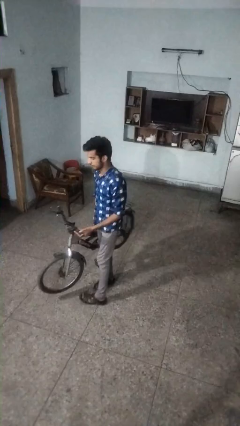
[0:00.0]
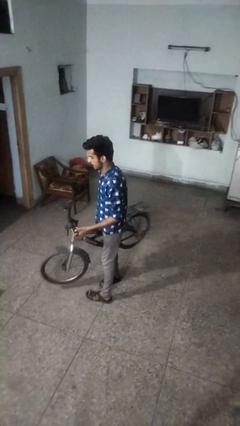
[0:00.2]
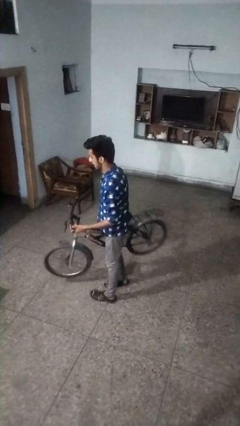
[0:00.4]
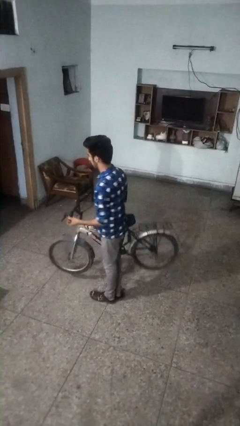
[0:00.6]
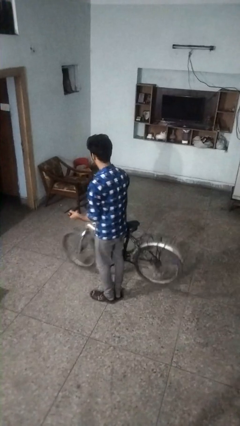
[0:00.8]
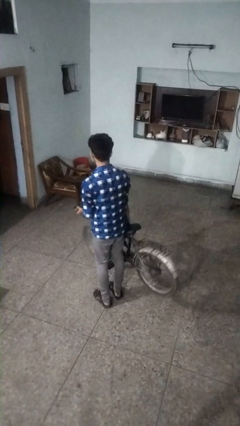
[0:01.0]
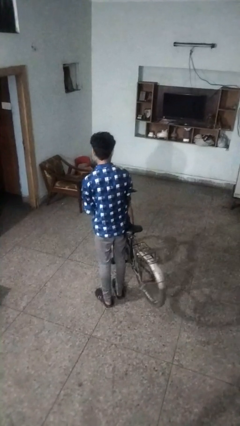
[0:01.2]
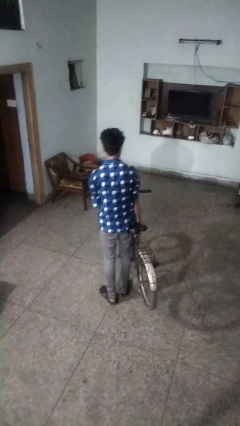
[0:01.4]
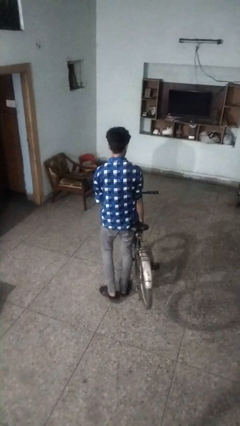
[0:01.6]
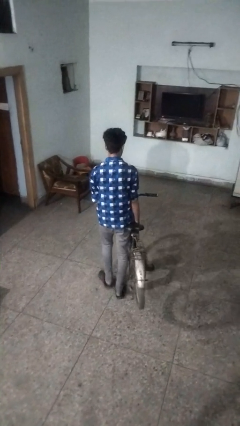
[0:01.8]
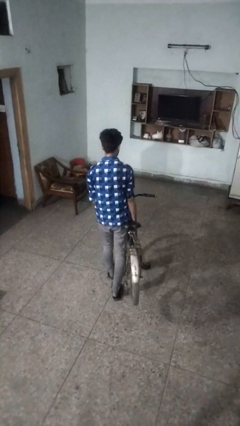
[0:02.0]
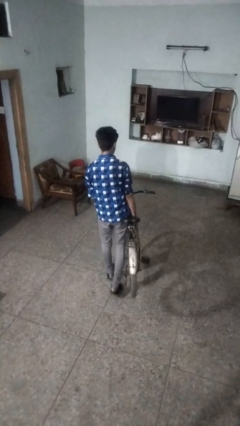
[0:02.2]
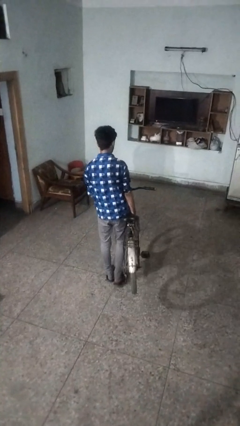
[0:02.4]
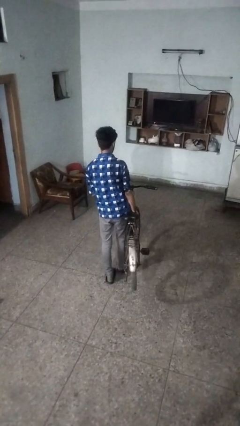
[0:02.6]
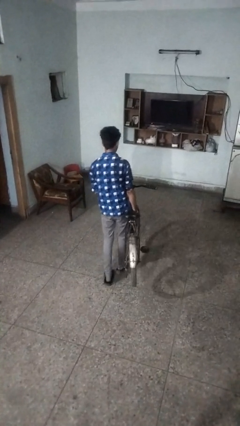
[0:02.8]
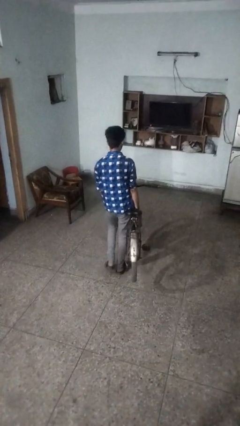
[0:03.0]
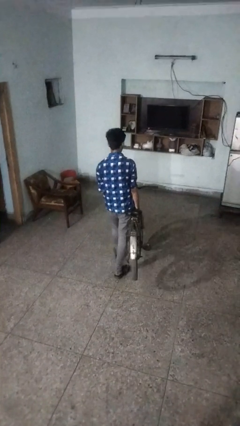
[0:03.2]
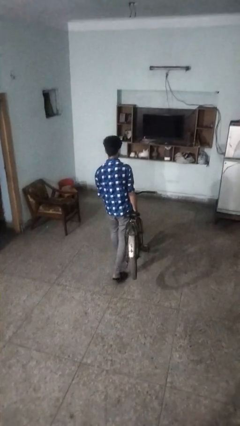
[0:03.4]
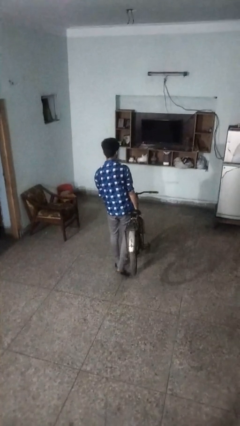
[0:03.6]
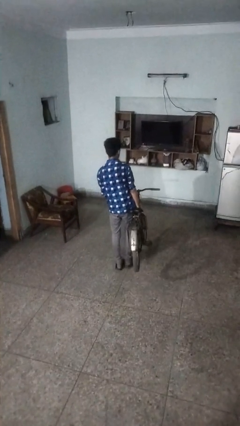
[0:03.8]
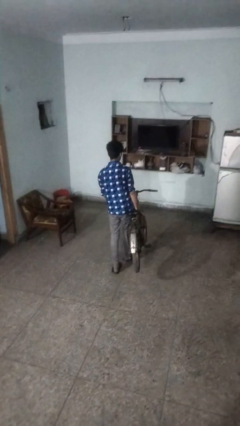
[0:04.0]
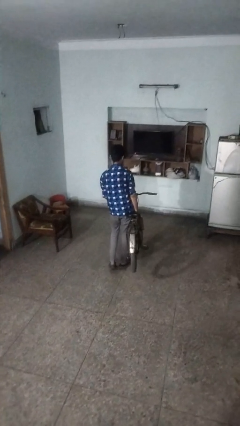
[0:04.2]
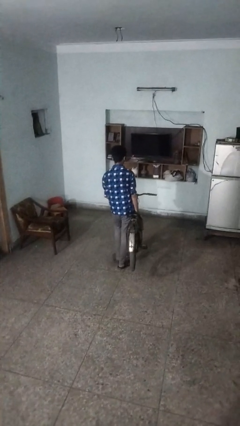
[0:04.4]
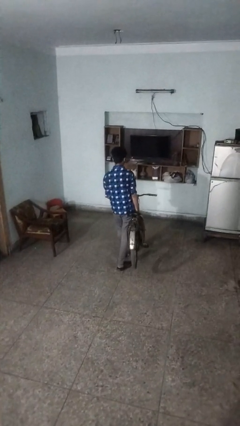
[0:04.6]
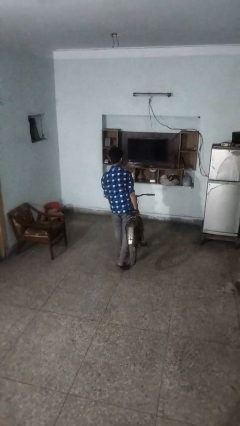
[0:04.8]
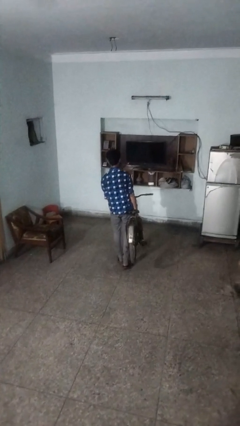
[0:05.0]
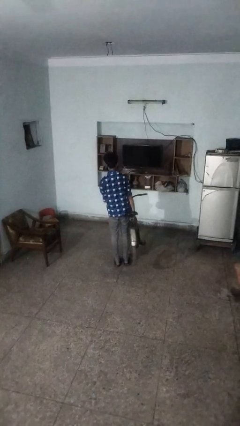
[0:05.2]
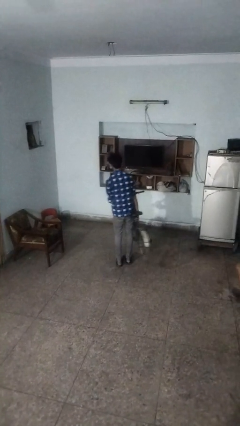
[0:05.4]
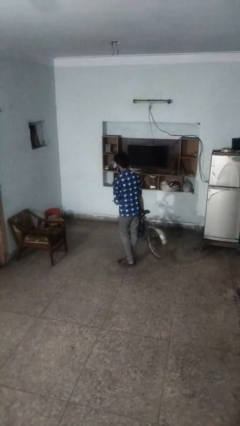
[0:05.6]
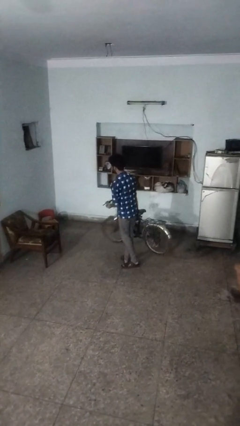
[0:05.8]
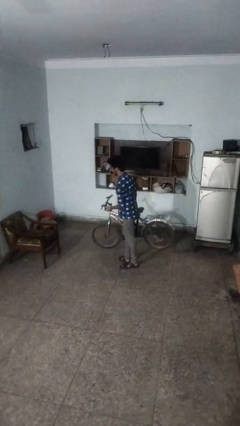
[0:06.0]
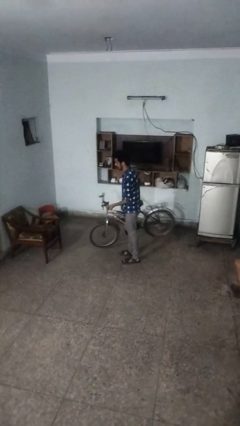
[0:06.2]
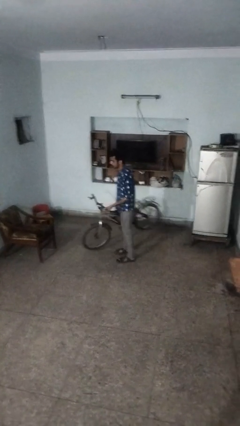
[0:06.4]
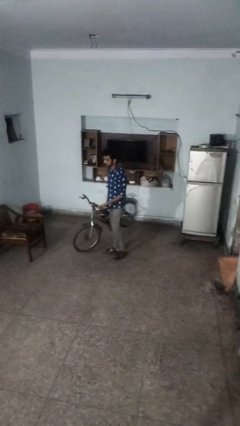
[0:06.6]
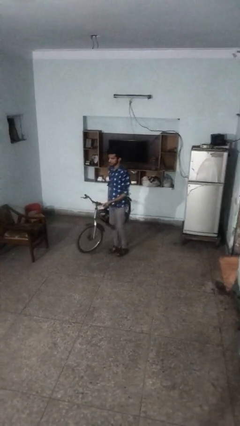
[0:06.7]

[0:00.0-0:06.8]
person carries bicycle

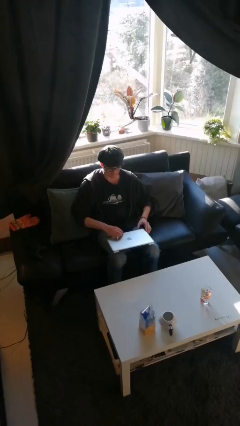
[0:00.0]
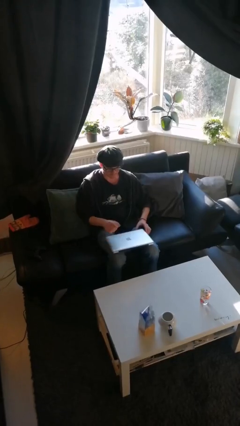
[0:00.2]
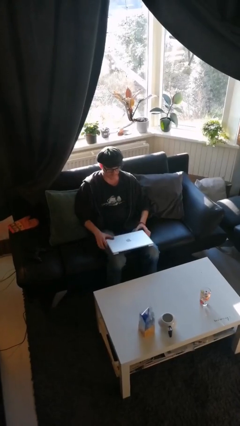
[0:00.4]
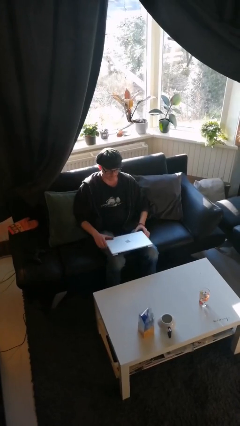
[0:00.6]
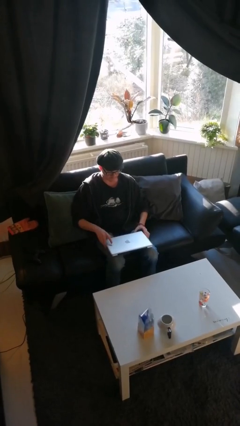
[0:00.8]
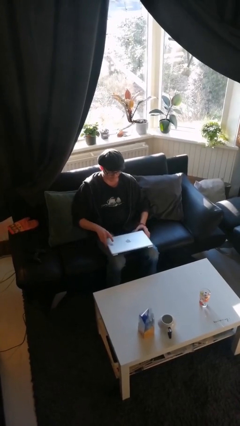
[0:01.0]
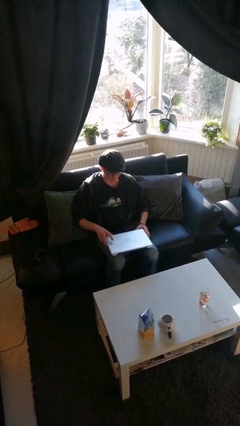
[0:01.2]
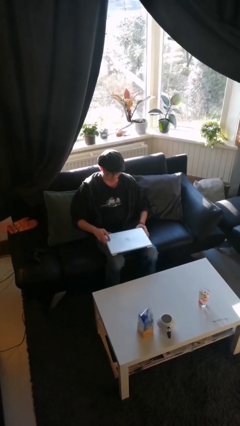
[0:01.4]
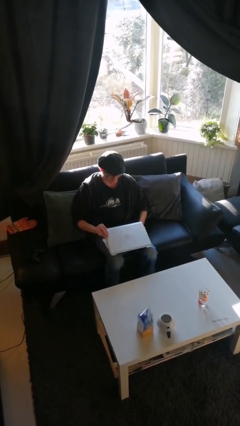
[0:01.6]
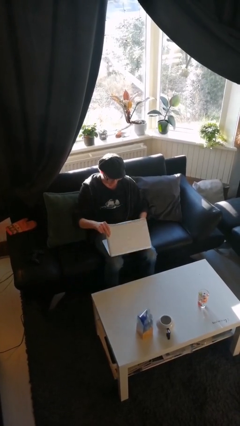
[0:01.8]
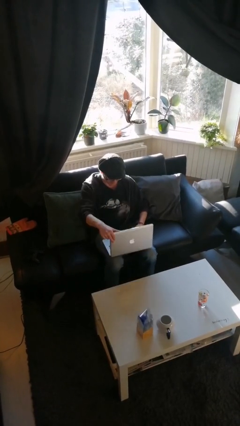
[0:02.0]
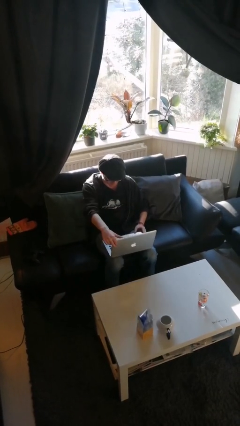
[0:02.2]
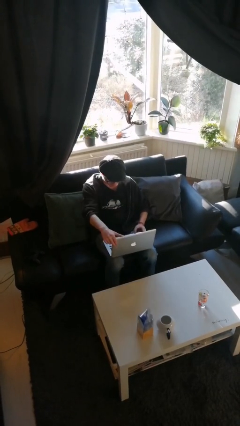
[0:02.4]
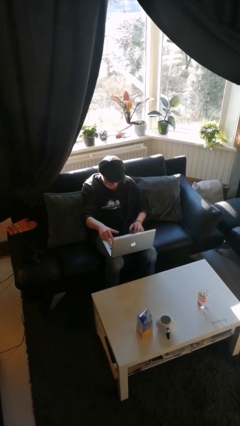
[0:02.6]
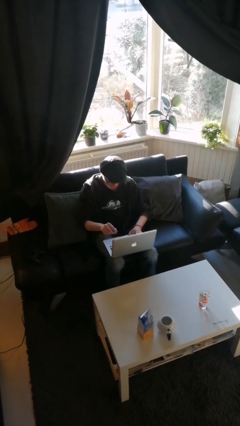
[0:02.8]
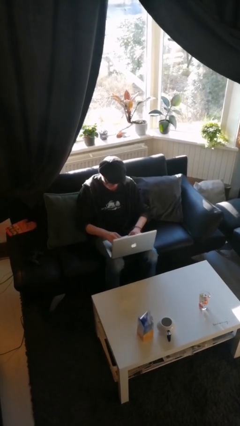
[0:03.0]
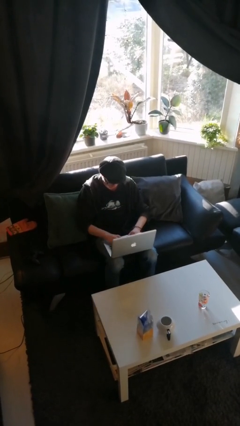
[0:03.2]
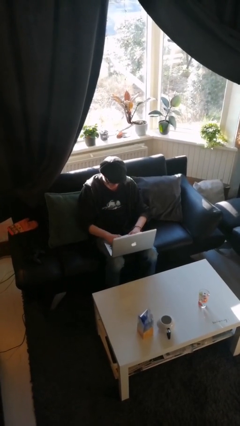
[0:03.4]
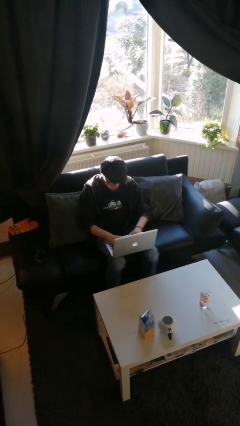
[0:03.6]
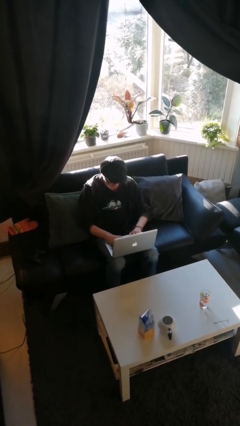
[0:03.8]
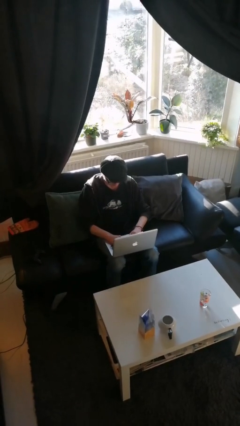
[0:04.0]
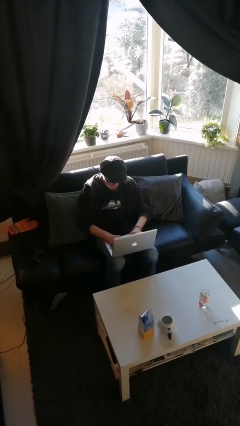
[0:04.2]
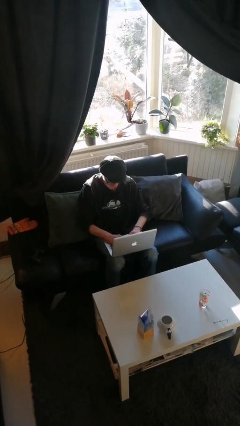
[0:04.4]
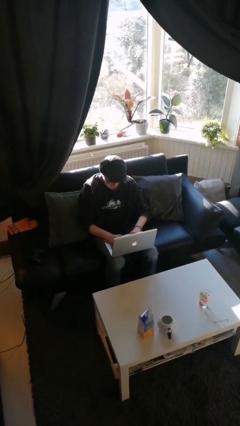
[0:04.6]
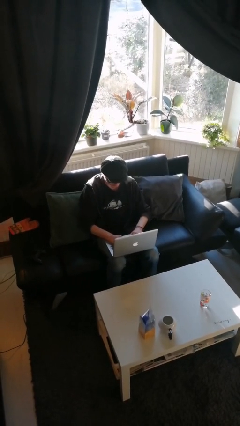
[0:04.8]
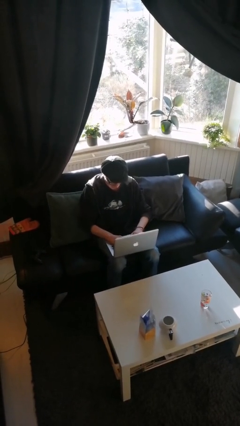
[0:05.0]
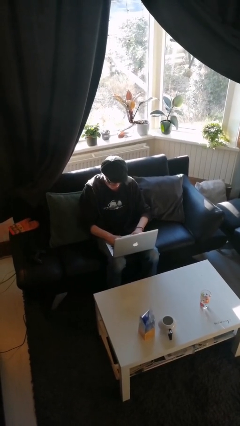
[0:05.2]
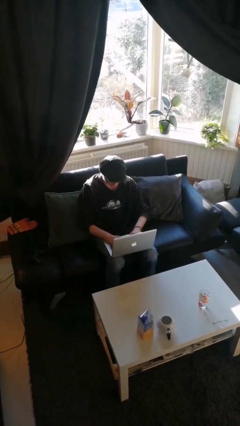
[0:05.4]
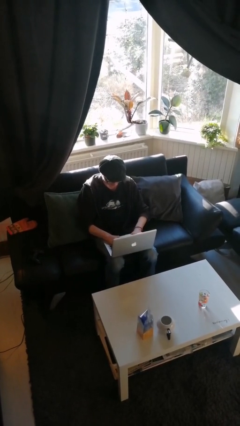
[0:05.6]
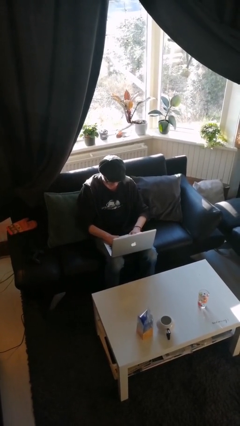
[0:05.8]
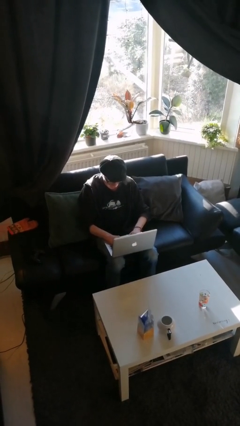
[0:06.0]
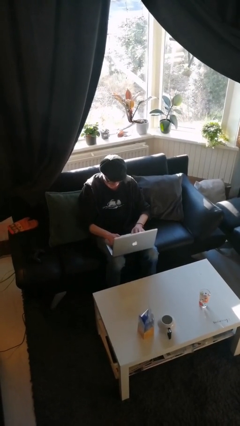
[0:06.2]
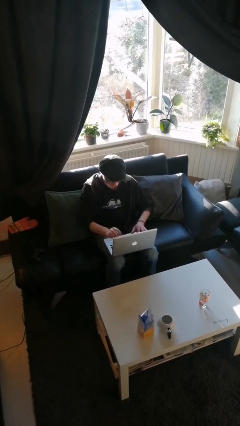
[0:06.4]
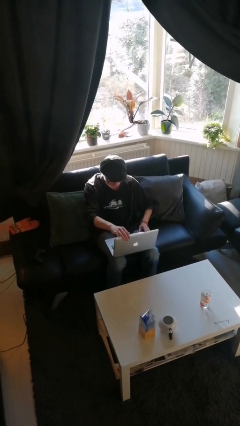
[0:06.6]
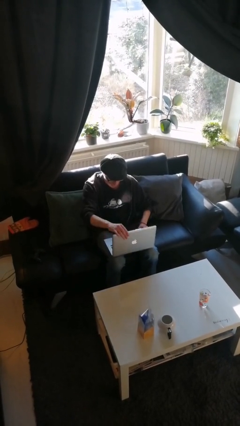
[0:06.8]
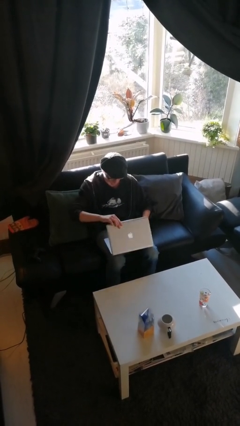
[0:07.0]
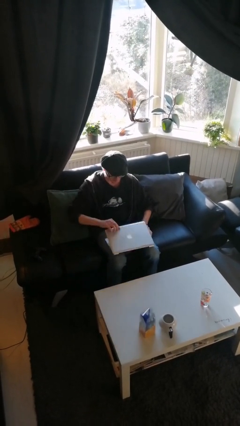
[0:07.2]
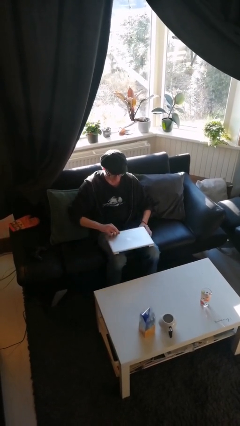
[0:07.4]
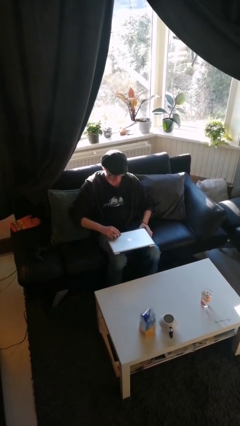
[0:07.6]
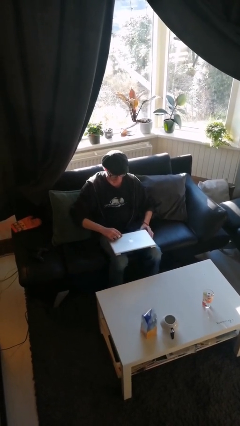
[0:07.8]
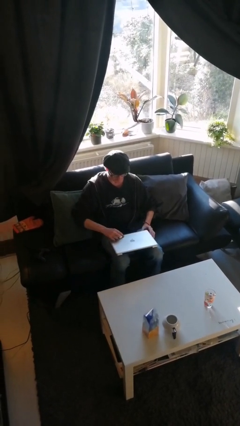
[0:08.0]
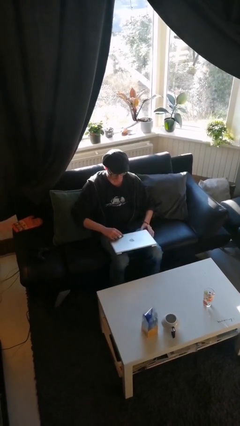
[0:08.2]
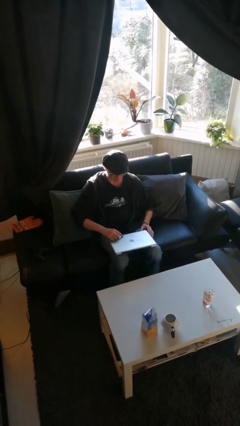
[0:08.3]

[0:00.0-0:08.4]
person interacts with laptop

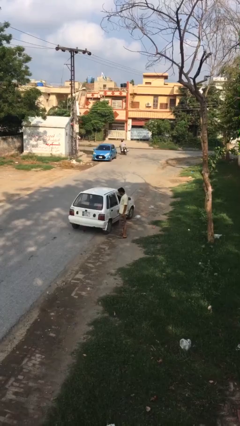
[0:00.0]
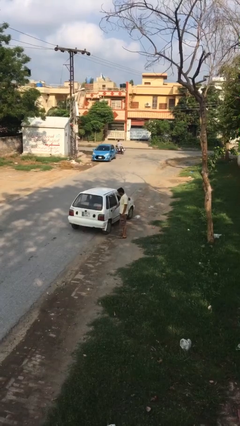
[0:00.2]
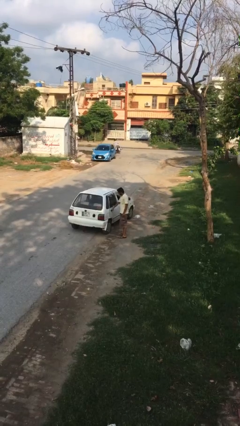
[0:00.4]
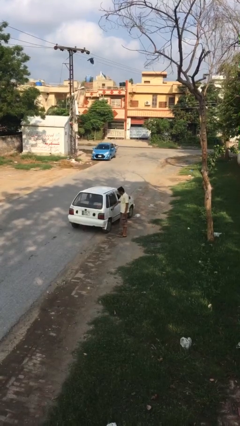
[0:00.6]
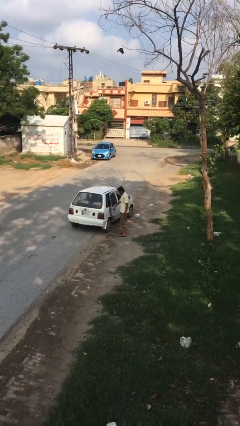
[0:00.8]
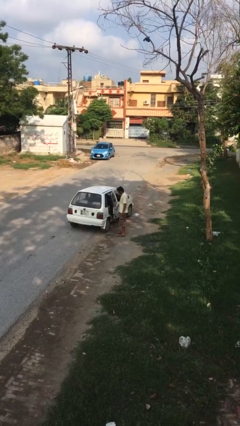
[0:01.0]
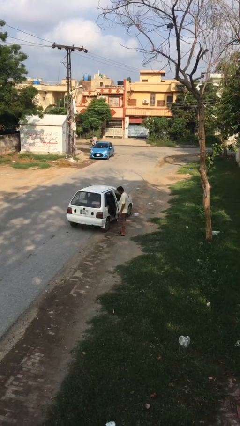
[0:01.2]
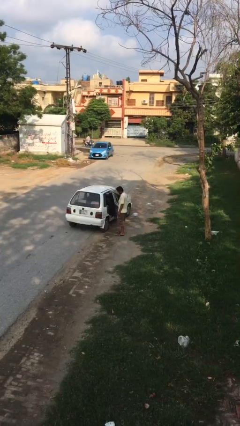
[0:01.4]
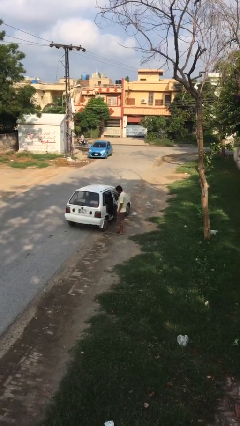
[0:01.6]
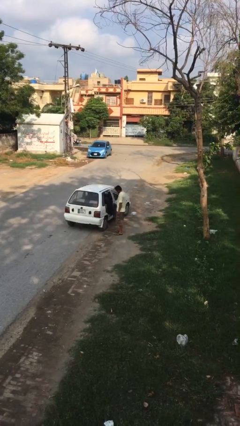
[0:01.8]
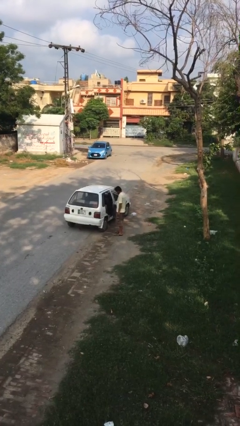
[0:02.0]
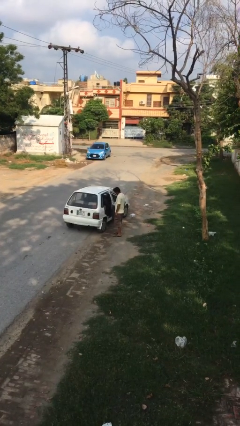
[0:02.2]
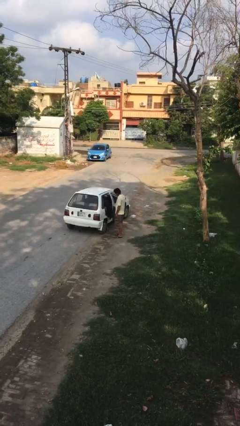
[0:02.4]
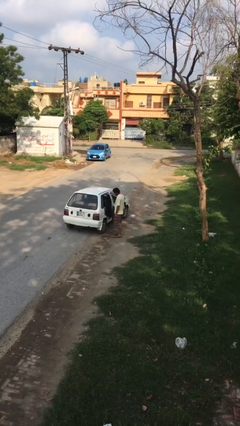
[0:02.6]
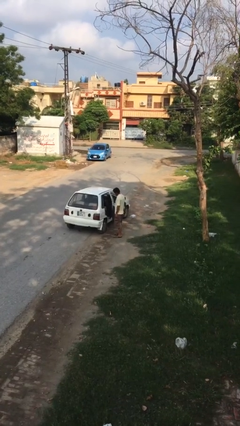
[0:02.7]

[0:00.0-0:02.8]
person opens car door
